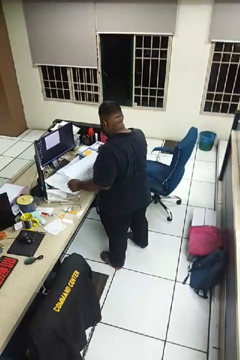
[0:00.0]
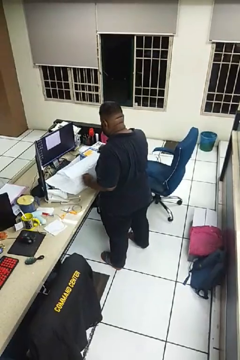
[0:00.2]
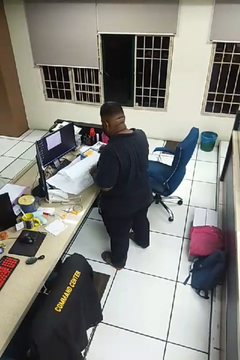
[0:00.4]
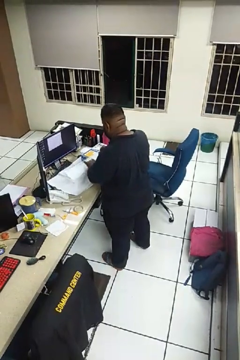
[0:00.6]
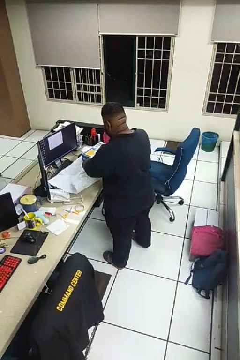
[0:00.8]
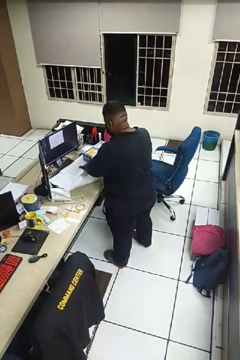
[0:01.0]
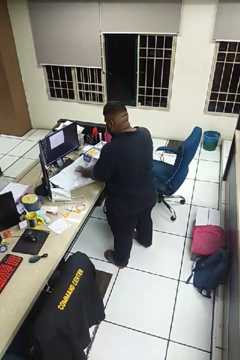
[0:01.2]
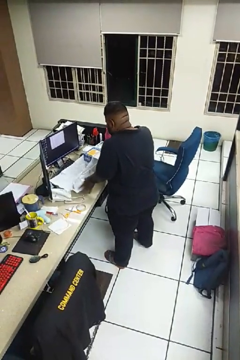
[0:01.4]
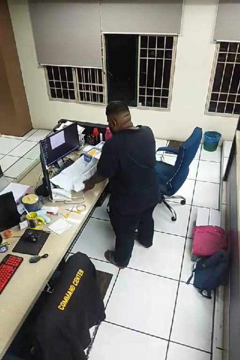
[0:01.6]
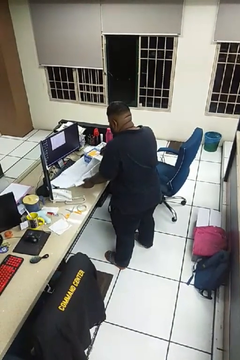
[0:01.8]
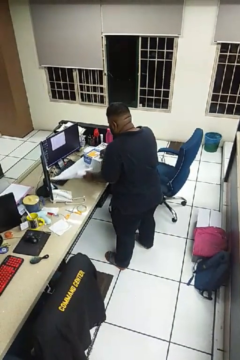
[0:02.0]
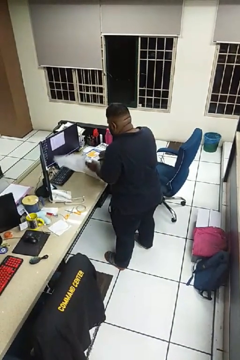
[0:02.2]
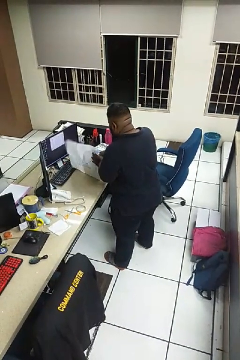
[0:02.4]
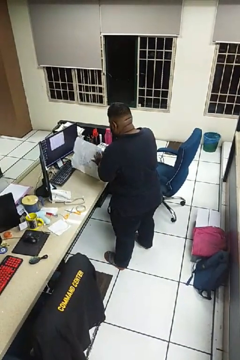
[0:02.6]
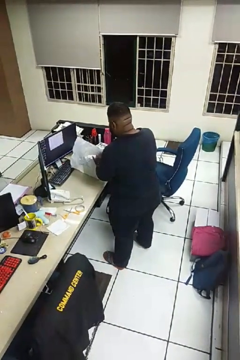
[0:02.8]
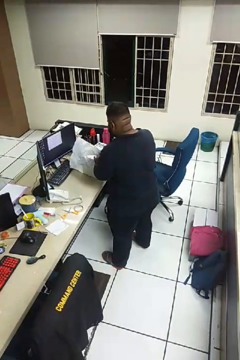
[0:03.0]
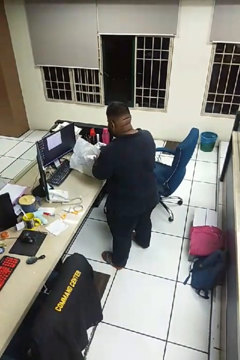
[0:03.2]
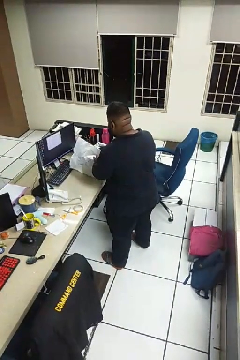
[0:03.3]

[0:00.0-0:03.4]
person wraps box

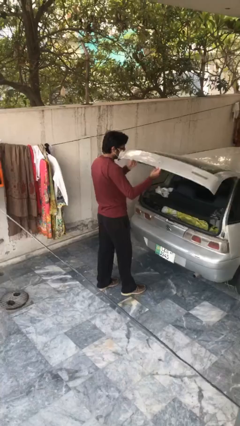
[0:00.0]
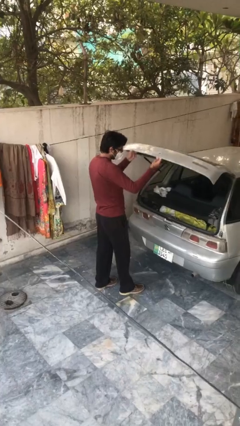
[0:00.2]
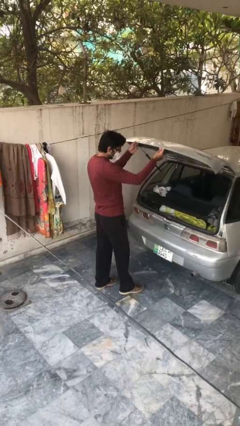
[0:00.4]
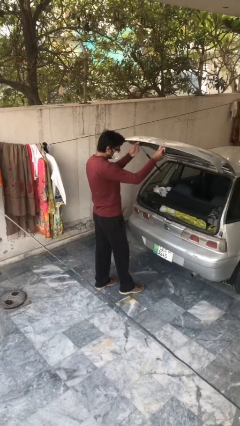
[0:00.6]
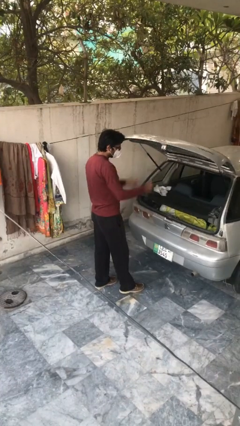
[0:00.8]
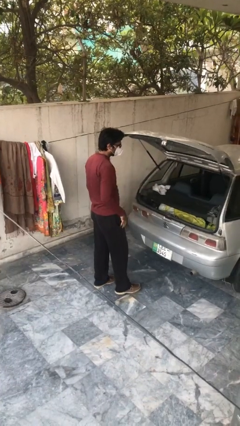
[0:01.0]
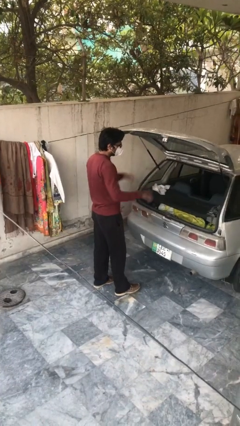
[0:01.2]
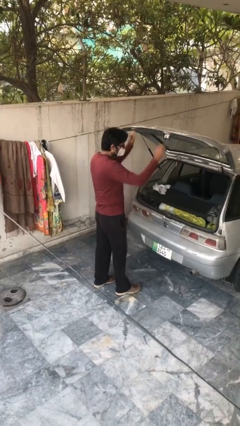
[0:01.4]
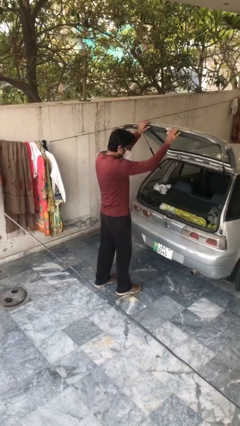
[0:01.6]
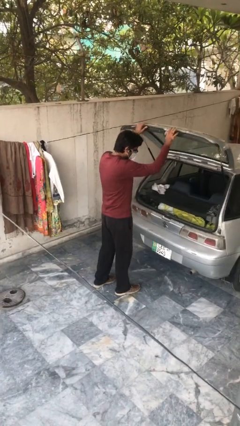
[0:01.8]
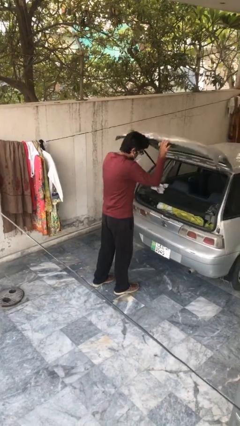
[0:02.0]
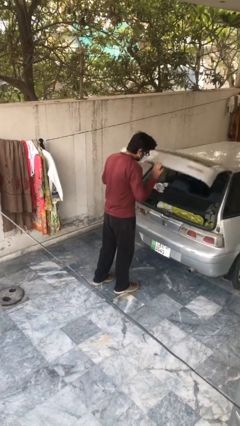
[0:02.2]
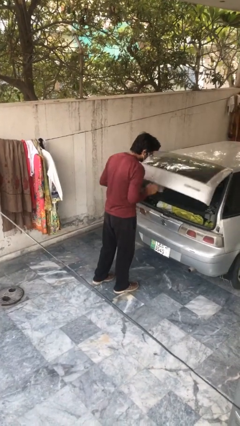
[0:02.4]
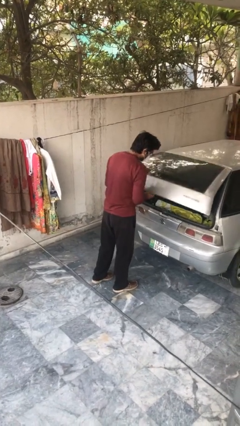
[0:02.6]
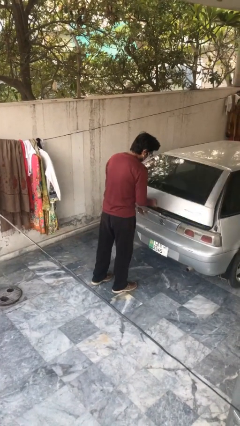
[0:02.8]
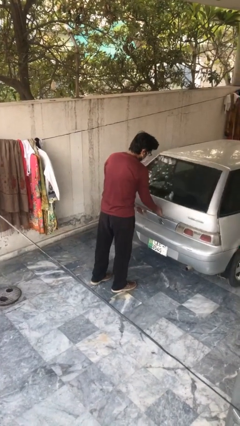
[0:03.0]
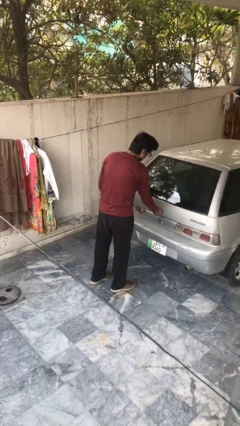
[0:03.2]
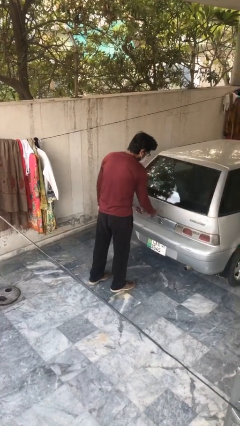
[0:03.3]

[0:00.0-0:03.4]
person closes car trunk

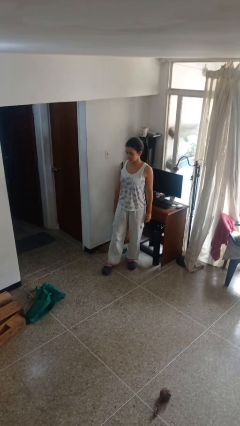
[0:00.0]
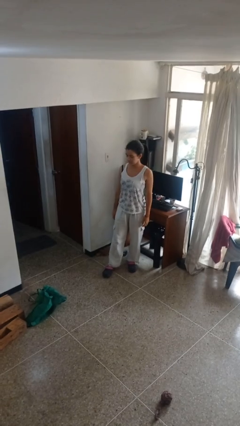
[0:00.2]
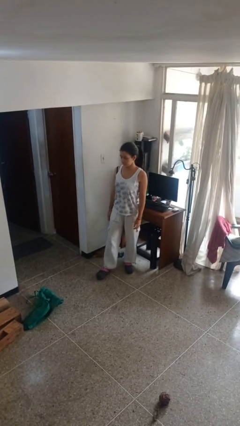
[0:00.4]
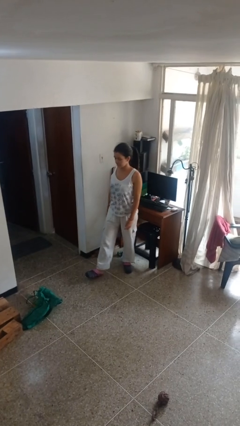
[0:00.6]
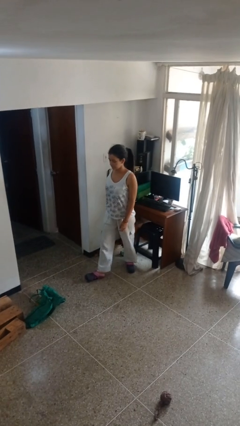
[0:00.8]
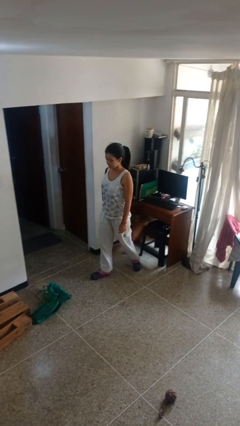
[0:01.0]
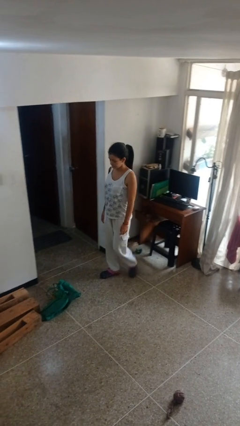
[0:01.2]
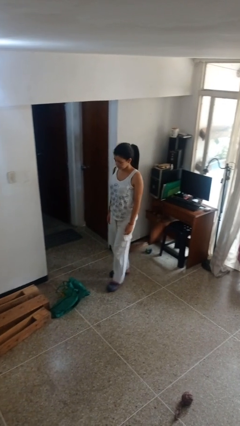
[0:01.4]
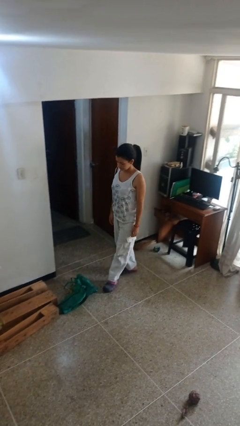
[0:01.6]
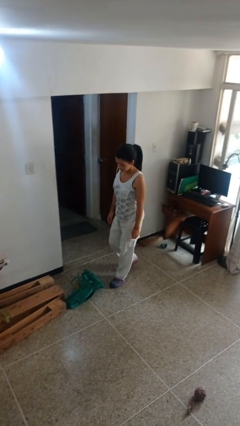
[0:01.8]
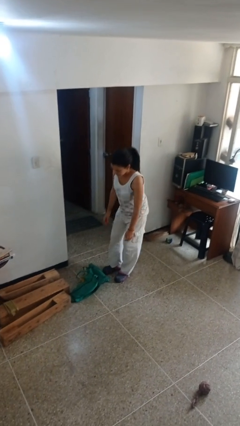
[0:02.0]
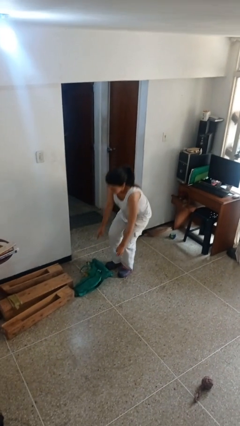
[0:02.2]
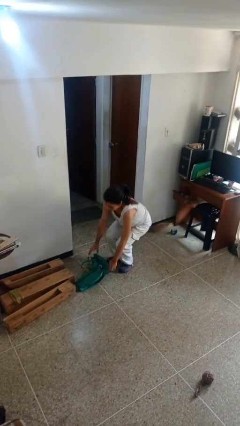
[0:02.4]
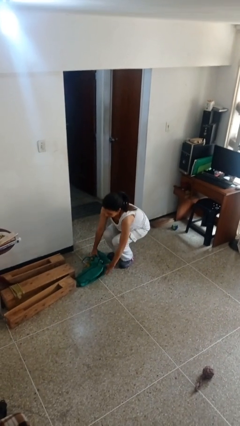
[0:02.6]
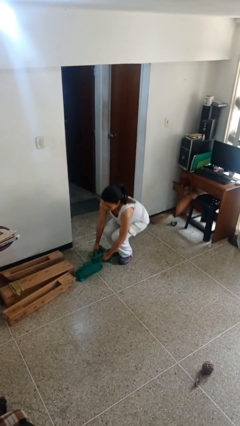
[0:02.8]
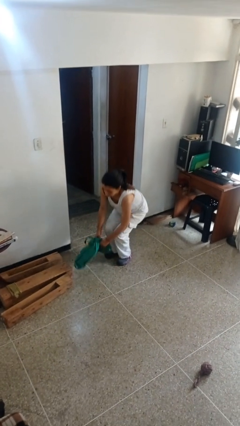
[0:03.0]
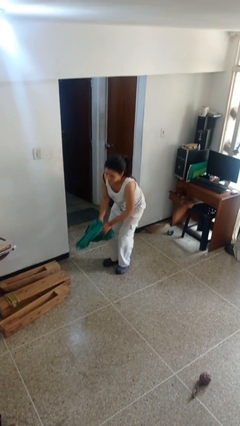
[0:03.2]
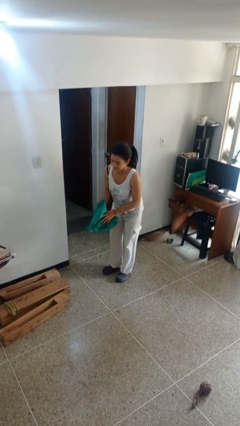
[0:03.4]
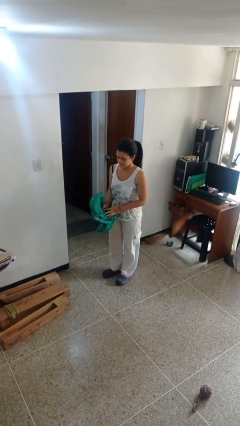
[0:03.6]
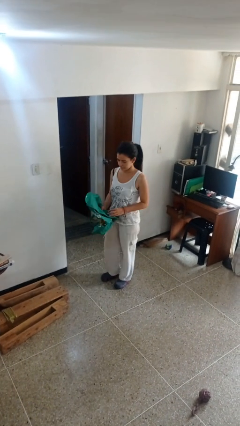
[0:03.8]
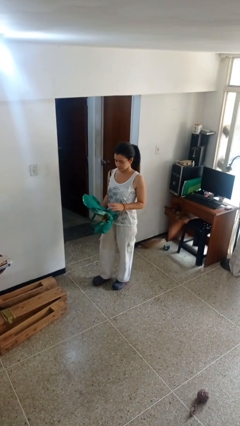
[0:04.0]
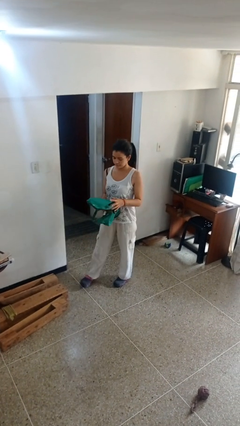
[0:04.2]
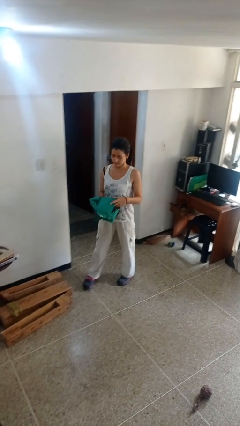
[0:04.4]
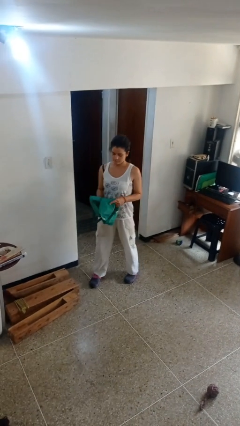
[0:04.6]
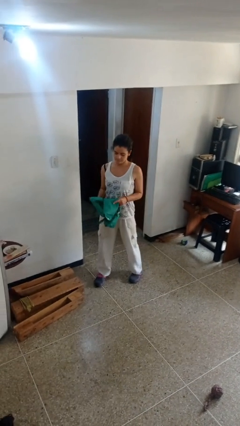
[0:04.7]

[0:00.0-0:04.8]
person picks up object from floor

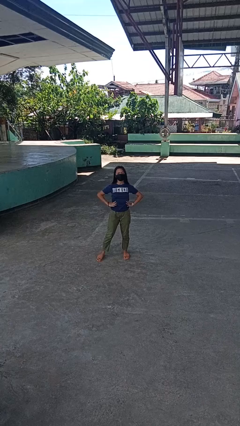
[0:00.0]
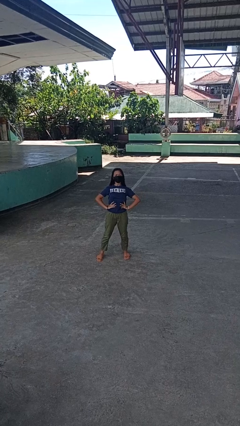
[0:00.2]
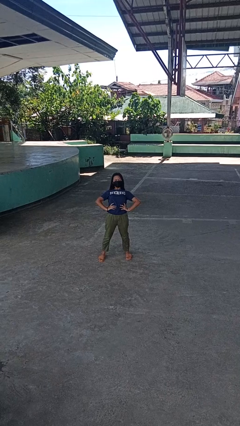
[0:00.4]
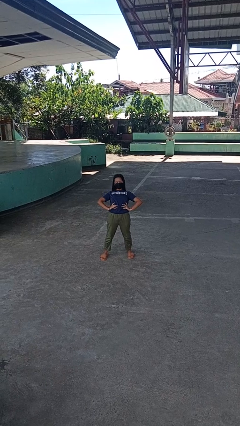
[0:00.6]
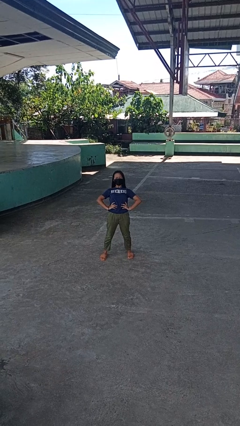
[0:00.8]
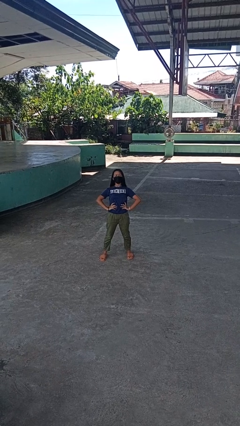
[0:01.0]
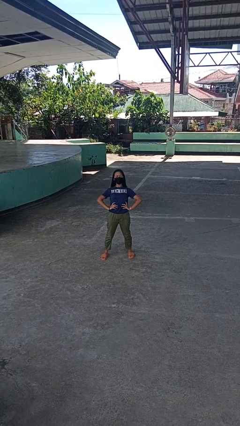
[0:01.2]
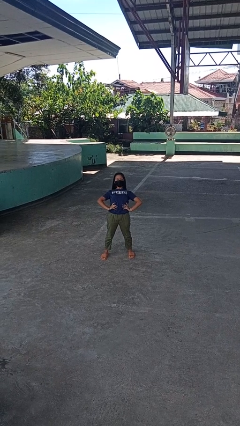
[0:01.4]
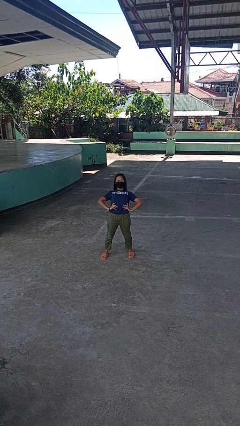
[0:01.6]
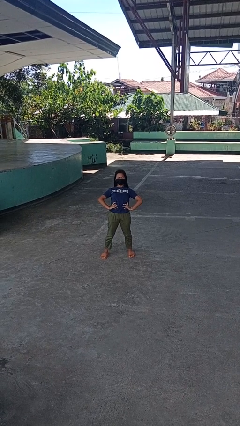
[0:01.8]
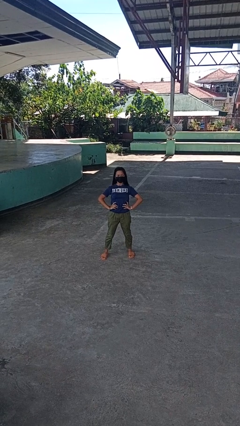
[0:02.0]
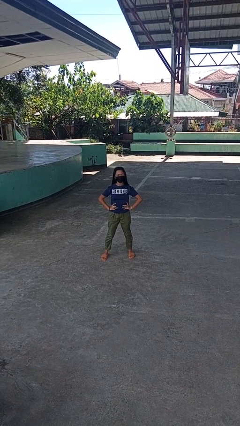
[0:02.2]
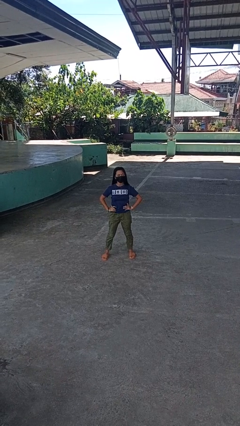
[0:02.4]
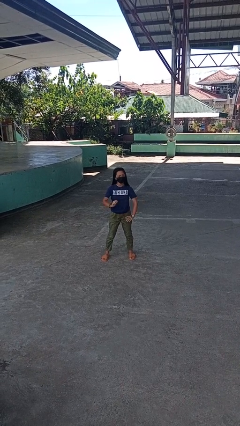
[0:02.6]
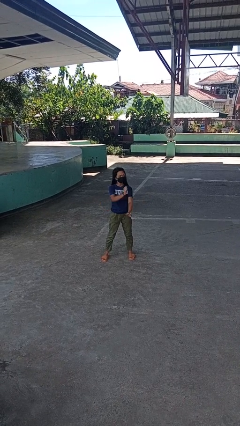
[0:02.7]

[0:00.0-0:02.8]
person stretches back

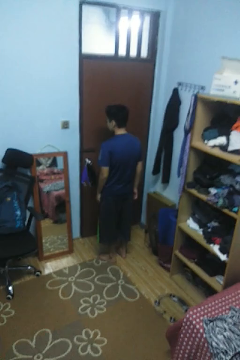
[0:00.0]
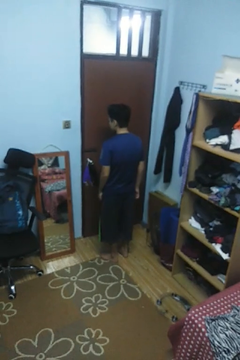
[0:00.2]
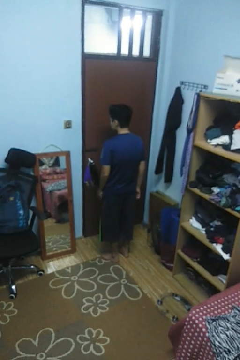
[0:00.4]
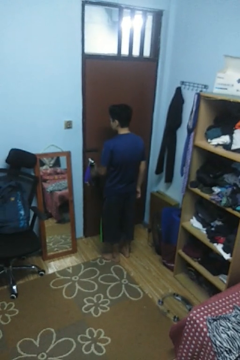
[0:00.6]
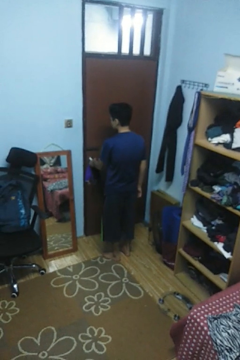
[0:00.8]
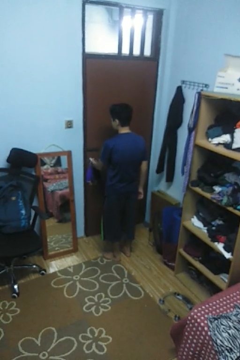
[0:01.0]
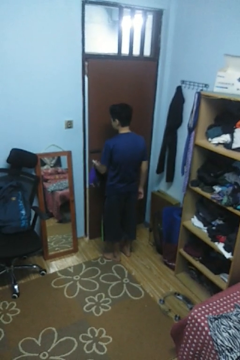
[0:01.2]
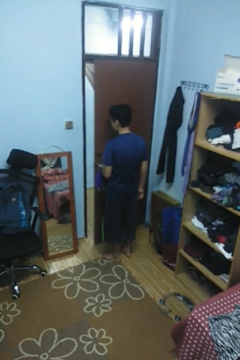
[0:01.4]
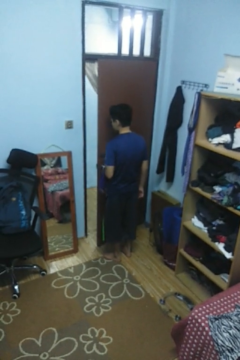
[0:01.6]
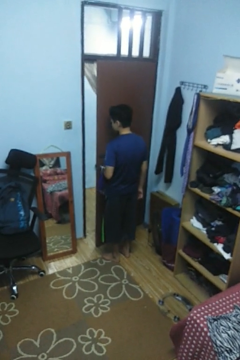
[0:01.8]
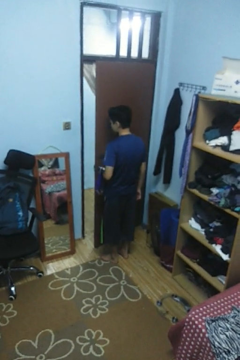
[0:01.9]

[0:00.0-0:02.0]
person opens facility door

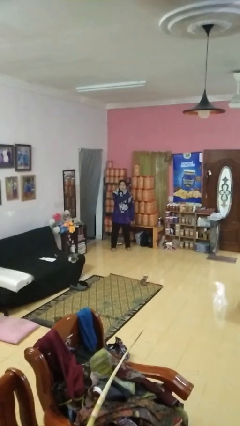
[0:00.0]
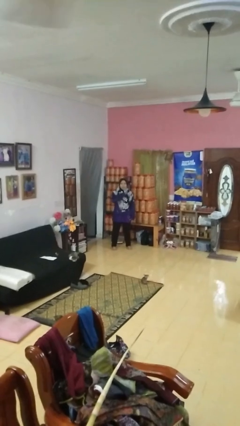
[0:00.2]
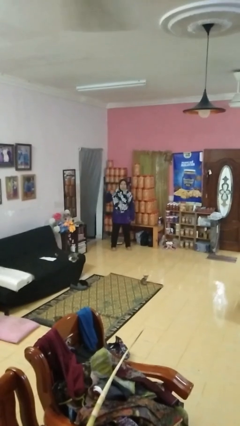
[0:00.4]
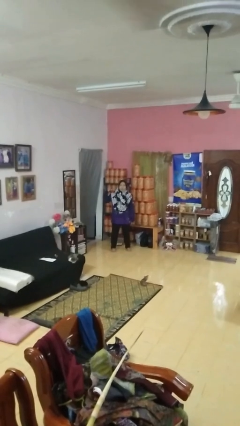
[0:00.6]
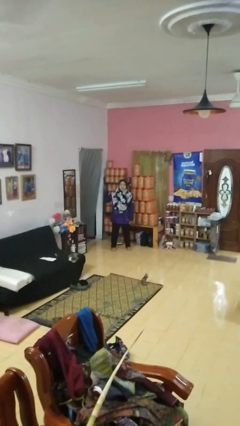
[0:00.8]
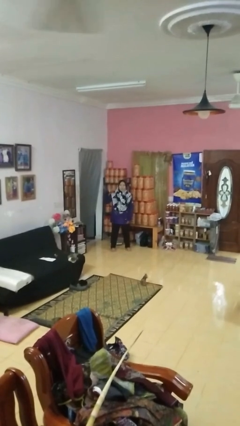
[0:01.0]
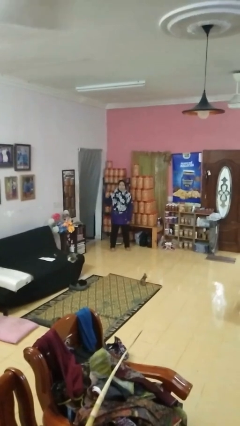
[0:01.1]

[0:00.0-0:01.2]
person gestures cut

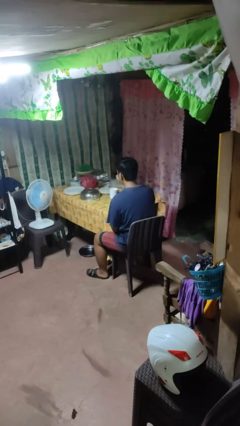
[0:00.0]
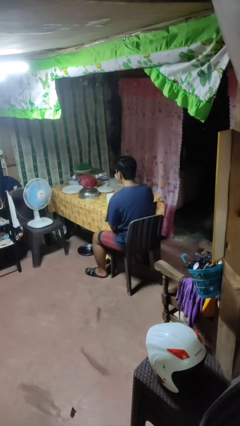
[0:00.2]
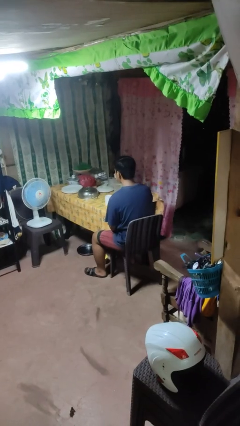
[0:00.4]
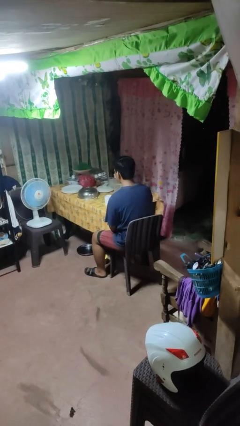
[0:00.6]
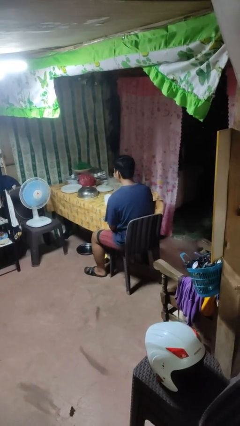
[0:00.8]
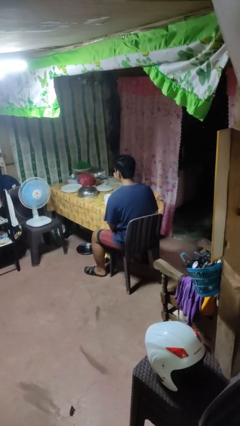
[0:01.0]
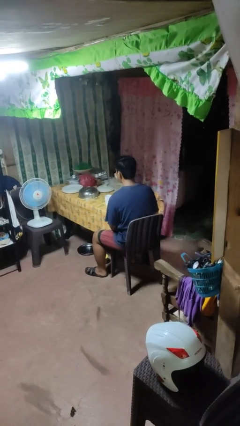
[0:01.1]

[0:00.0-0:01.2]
person puts down object on table
